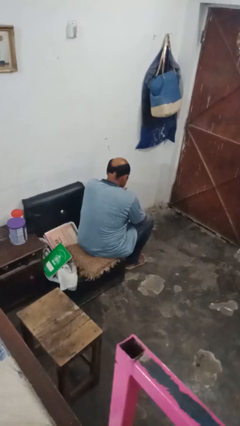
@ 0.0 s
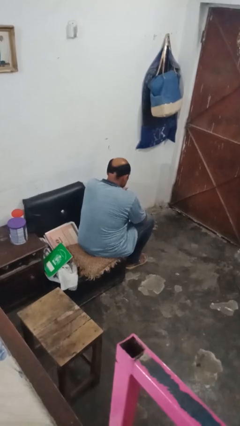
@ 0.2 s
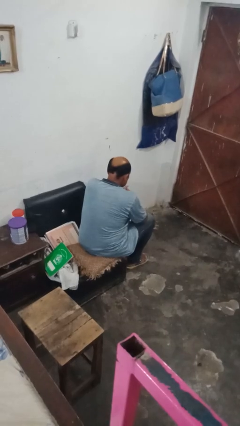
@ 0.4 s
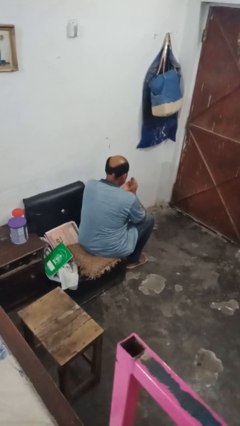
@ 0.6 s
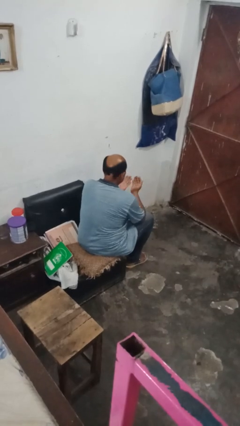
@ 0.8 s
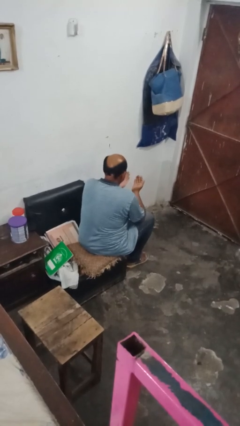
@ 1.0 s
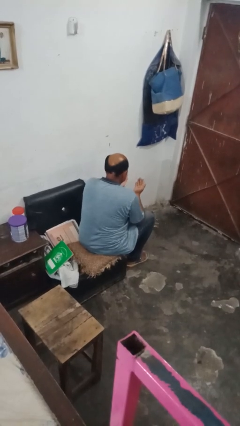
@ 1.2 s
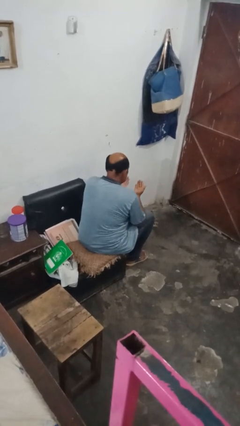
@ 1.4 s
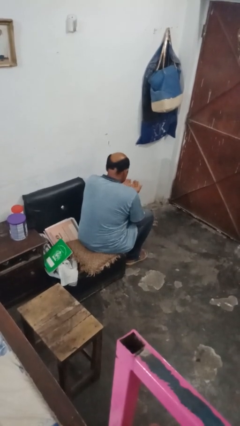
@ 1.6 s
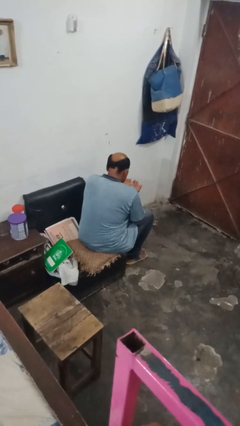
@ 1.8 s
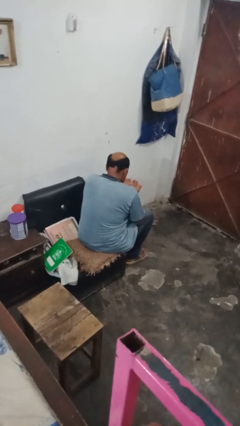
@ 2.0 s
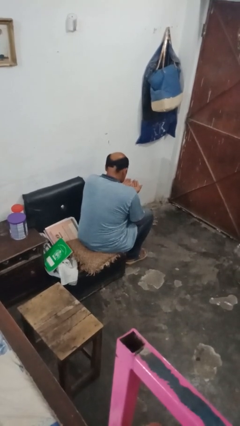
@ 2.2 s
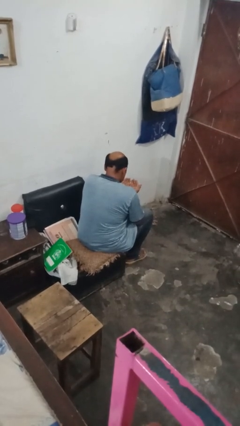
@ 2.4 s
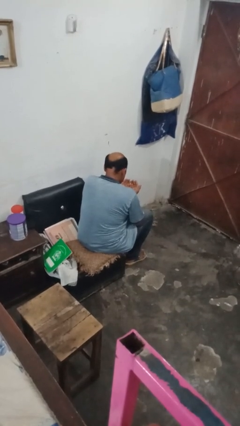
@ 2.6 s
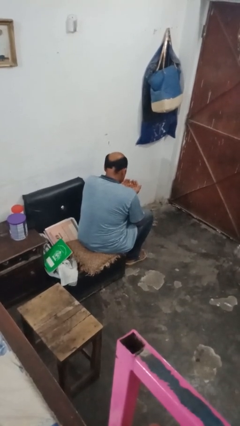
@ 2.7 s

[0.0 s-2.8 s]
person looks at hands in lap

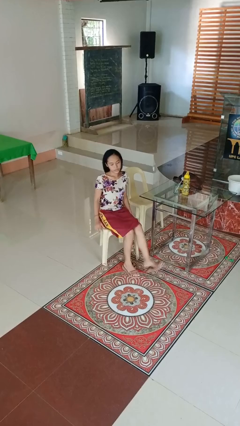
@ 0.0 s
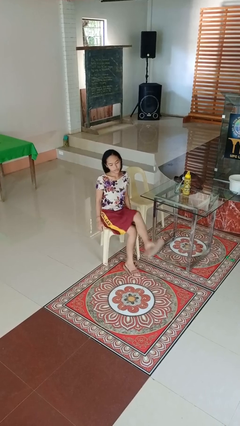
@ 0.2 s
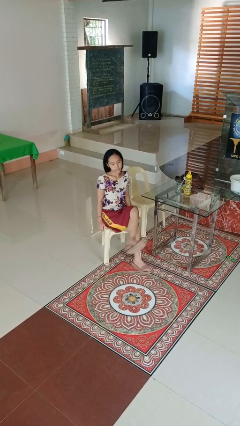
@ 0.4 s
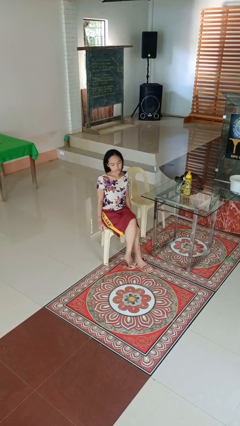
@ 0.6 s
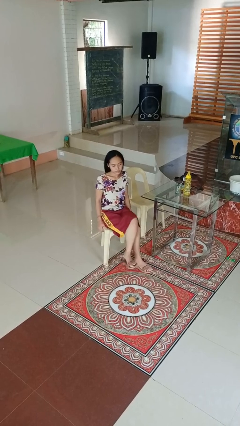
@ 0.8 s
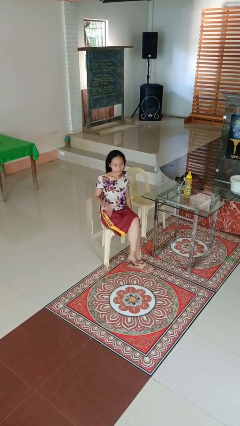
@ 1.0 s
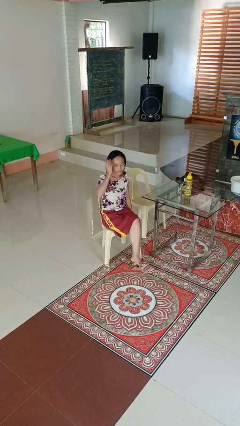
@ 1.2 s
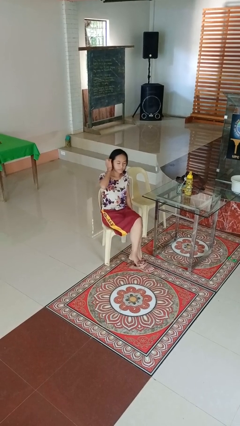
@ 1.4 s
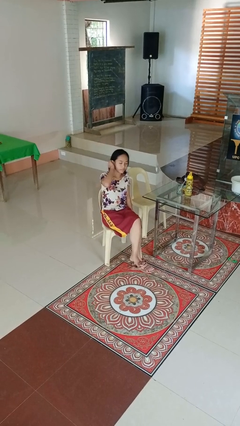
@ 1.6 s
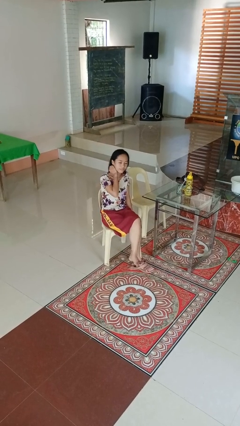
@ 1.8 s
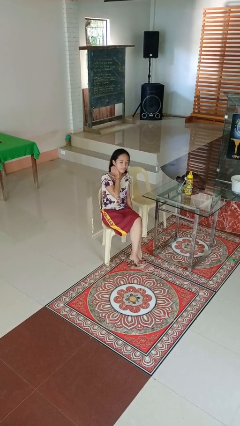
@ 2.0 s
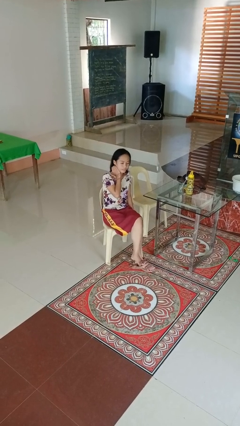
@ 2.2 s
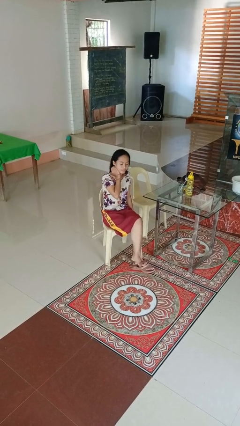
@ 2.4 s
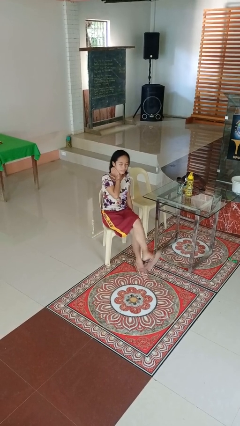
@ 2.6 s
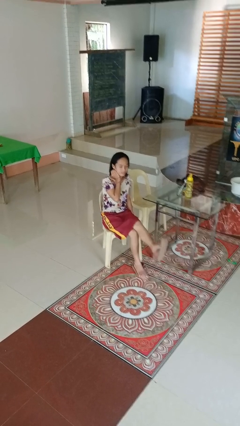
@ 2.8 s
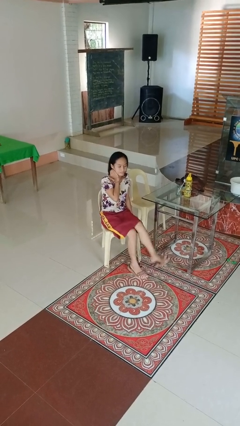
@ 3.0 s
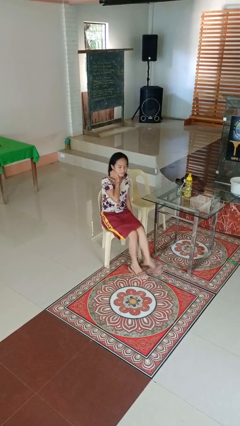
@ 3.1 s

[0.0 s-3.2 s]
person crosses legs

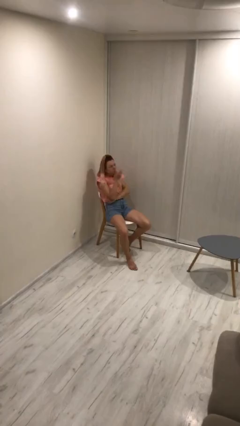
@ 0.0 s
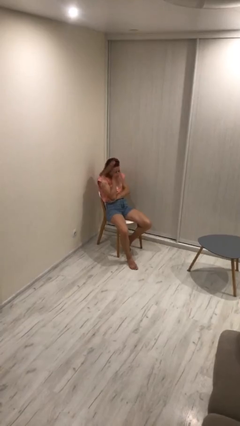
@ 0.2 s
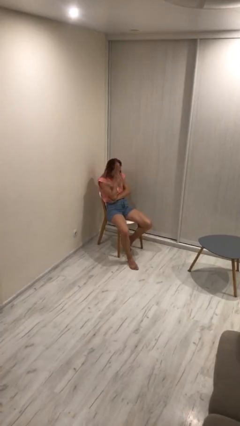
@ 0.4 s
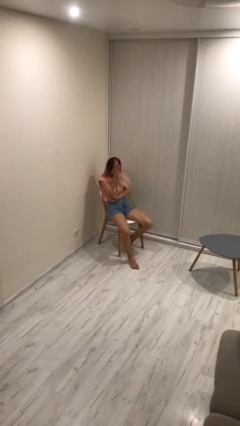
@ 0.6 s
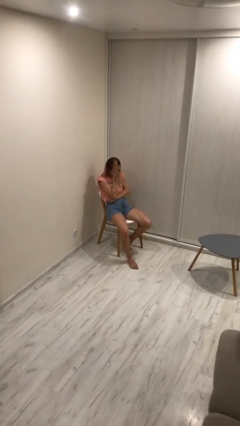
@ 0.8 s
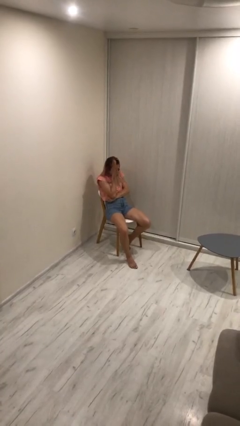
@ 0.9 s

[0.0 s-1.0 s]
person sneezes into hand

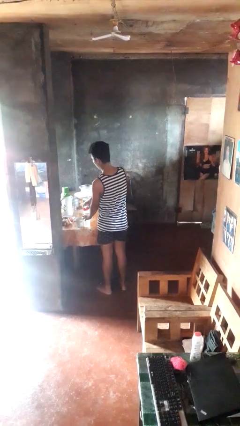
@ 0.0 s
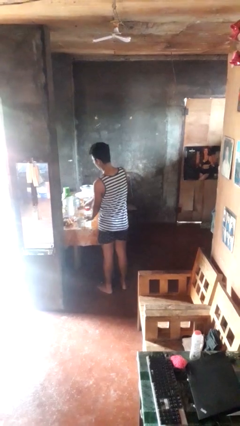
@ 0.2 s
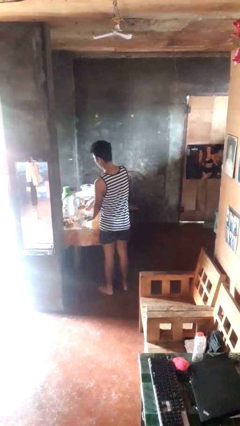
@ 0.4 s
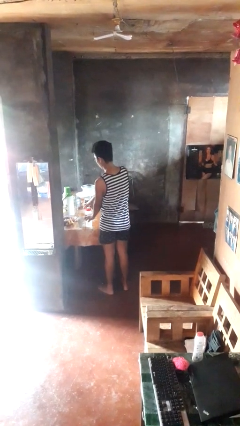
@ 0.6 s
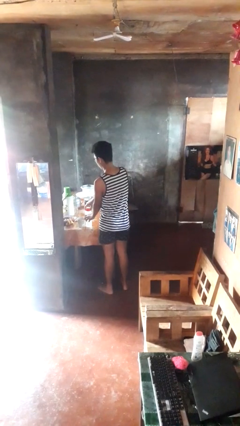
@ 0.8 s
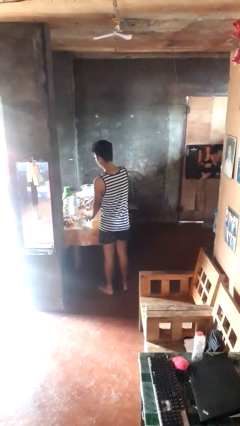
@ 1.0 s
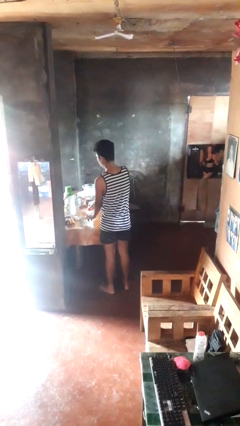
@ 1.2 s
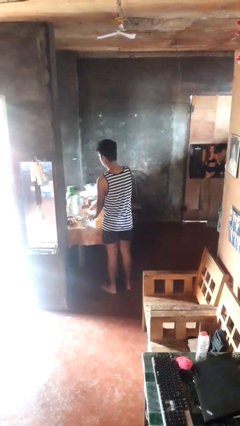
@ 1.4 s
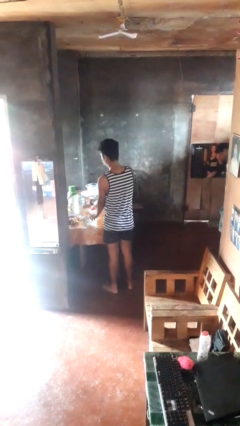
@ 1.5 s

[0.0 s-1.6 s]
person screws lid to bottle

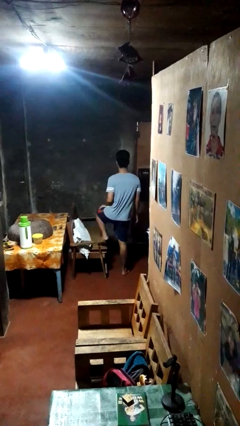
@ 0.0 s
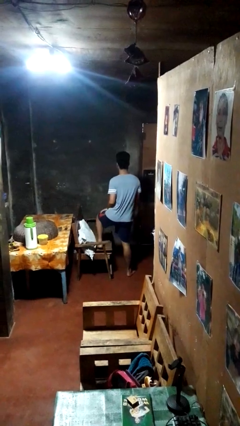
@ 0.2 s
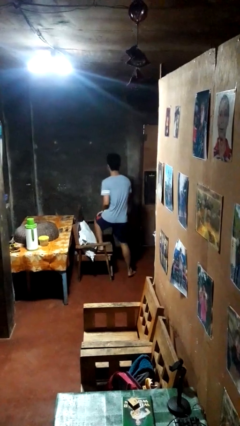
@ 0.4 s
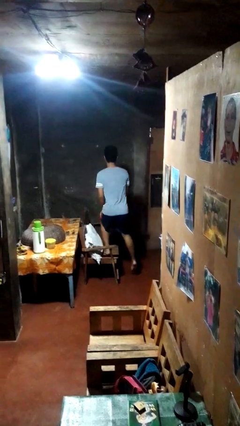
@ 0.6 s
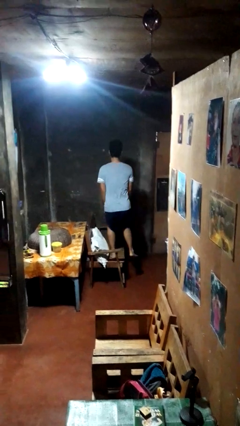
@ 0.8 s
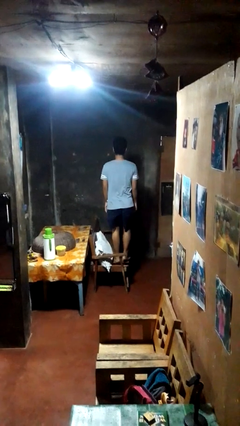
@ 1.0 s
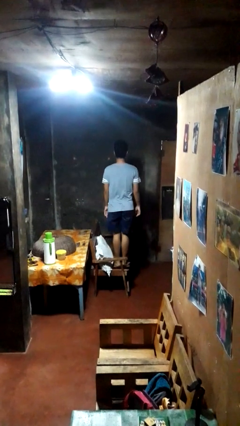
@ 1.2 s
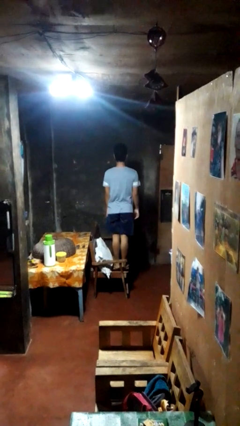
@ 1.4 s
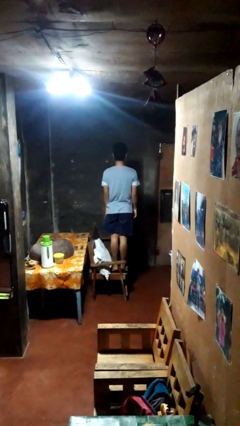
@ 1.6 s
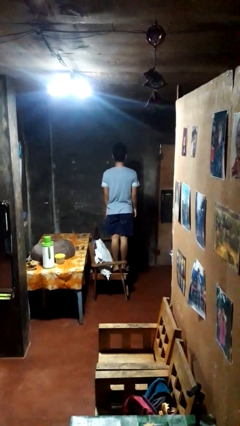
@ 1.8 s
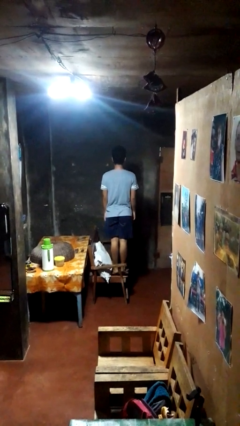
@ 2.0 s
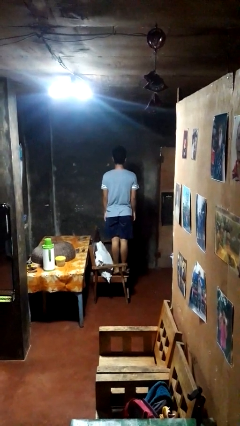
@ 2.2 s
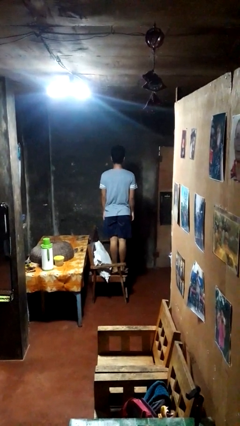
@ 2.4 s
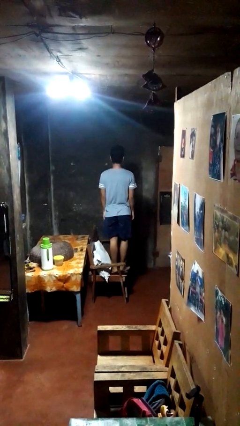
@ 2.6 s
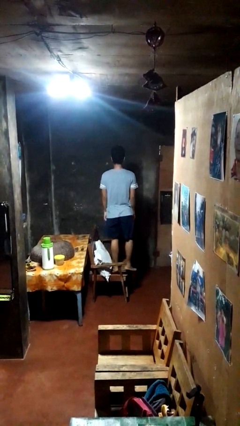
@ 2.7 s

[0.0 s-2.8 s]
person climbs on couch

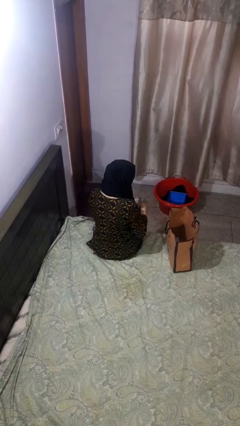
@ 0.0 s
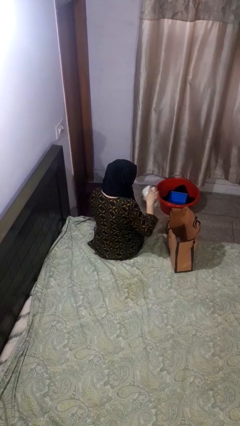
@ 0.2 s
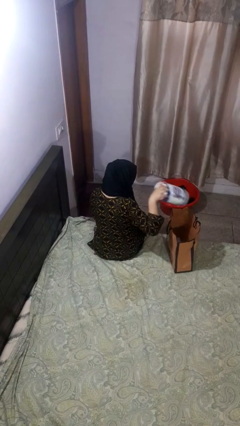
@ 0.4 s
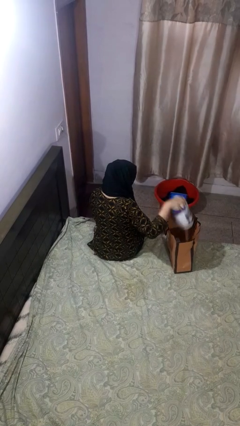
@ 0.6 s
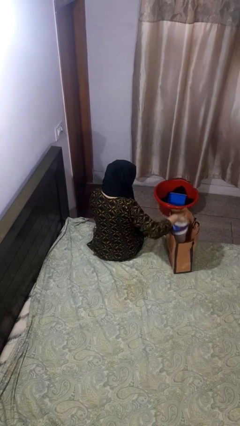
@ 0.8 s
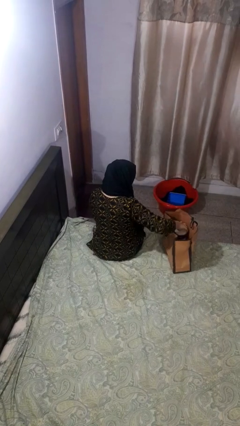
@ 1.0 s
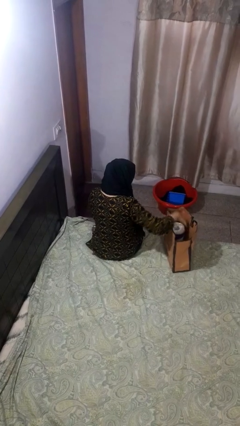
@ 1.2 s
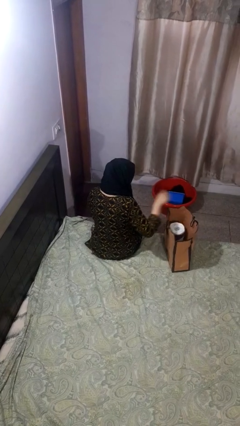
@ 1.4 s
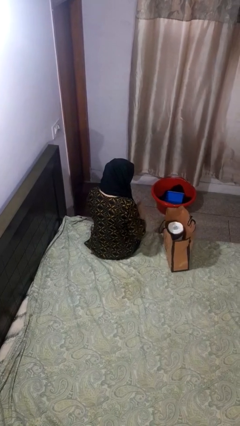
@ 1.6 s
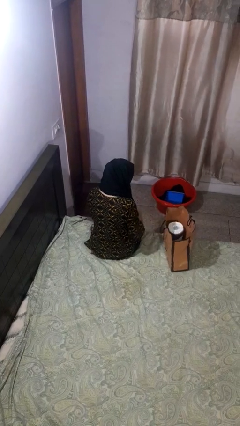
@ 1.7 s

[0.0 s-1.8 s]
person puts object into bag

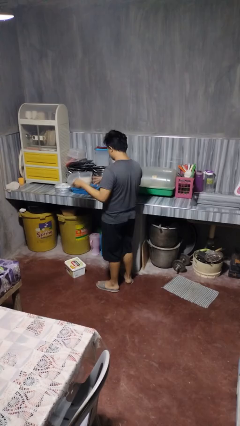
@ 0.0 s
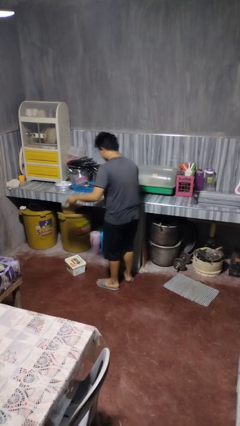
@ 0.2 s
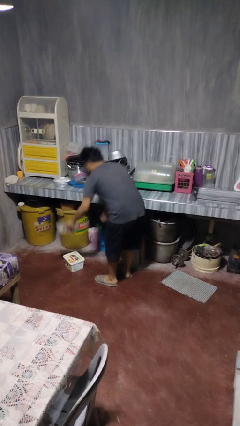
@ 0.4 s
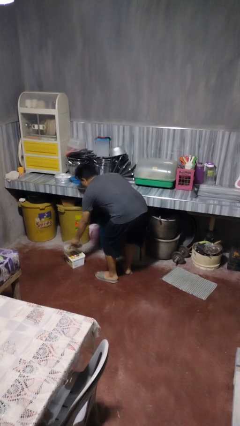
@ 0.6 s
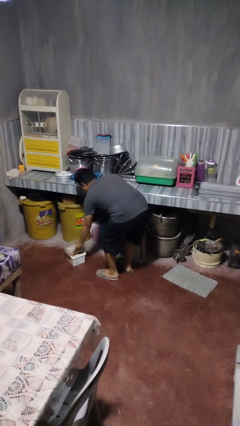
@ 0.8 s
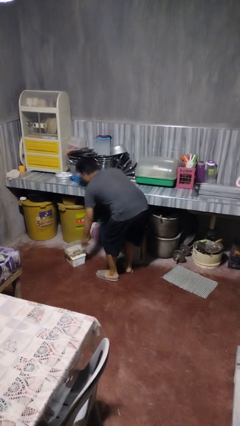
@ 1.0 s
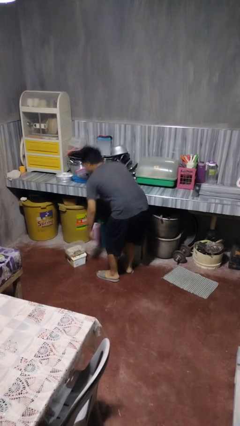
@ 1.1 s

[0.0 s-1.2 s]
person puts down object on countertop

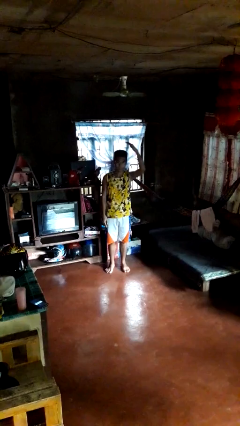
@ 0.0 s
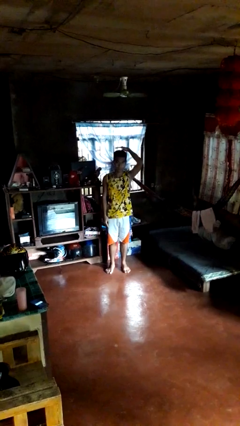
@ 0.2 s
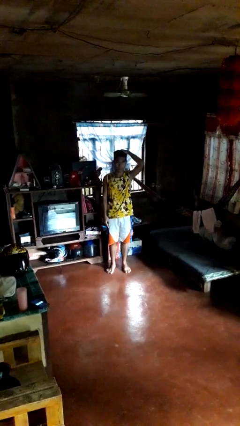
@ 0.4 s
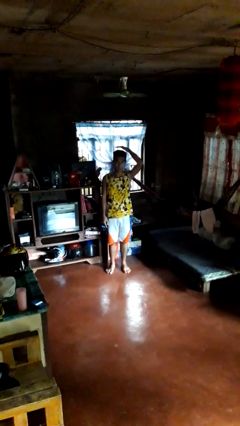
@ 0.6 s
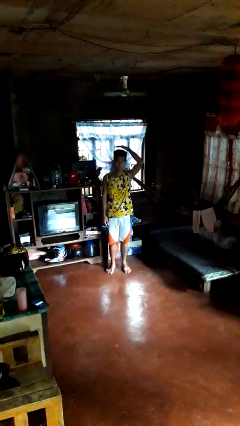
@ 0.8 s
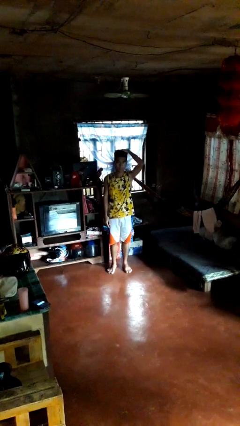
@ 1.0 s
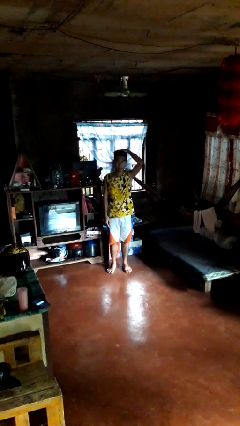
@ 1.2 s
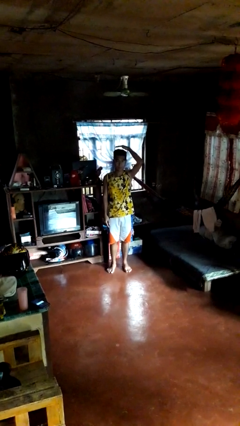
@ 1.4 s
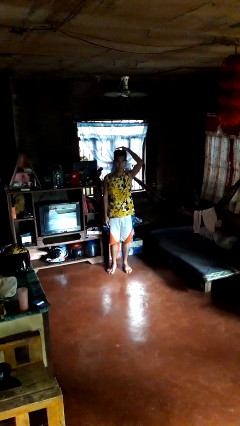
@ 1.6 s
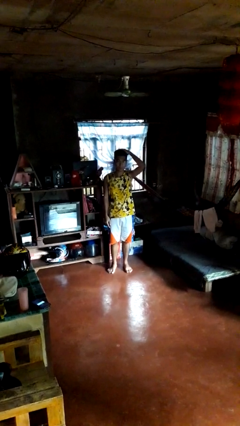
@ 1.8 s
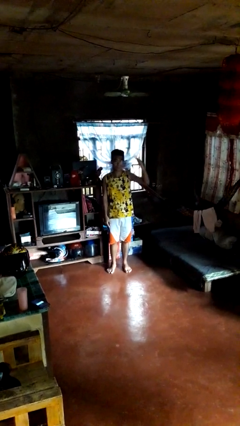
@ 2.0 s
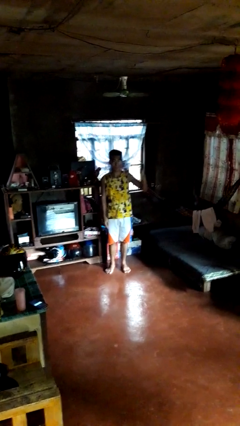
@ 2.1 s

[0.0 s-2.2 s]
person pats head

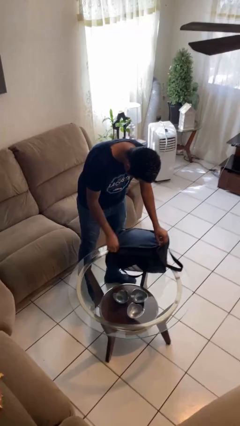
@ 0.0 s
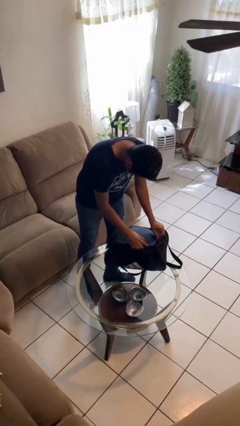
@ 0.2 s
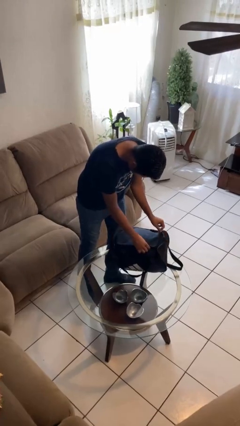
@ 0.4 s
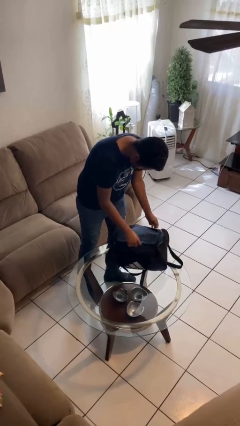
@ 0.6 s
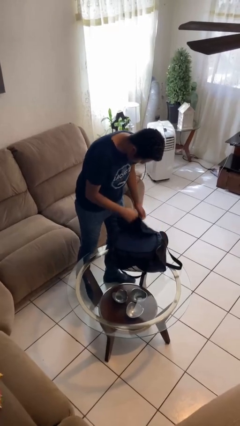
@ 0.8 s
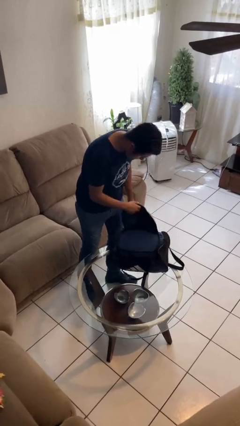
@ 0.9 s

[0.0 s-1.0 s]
person opens suitcase
